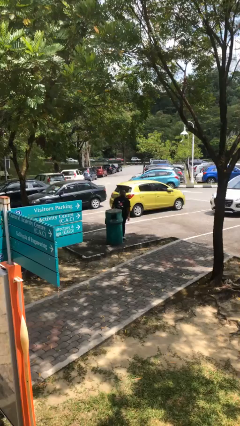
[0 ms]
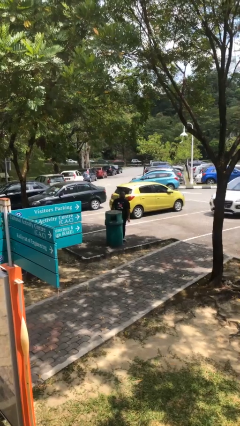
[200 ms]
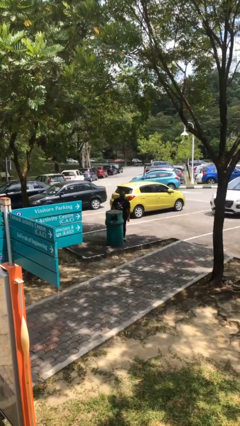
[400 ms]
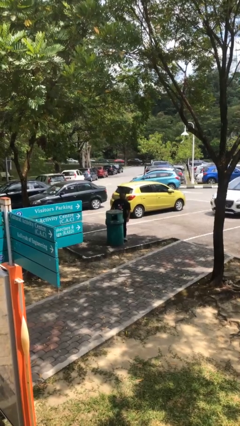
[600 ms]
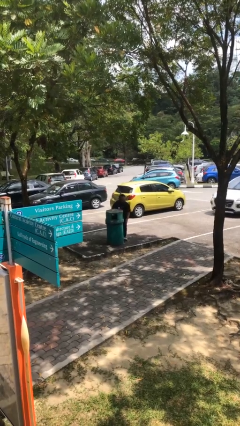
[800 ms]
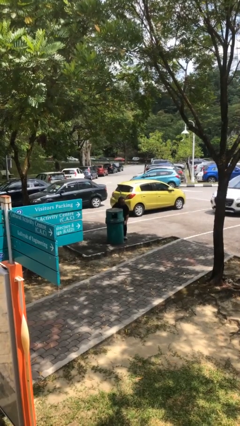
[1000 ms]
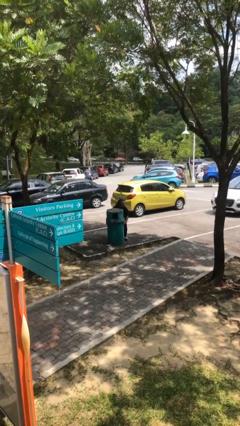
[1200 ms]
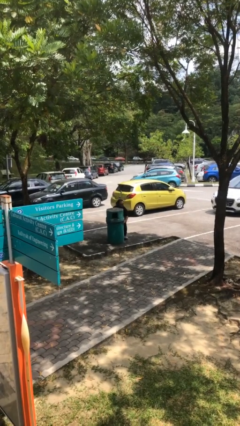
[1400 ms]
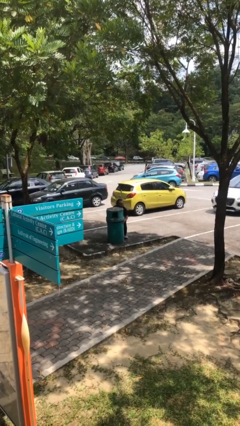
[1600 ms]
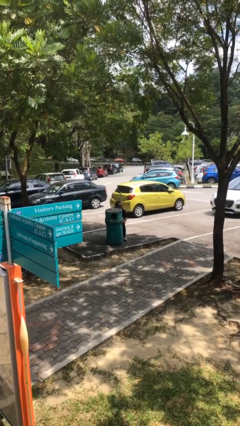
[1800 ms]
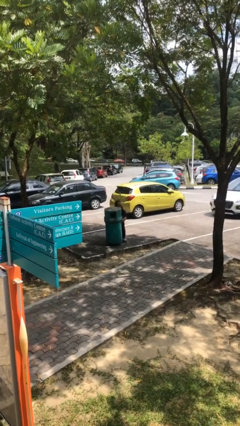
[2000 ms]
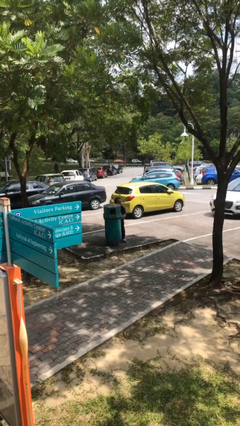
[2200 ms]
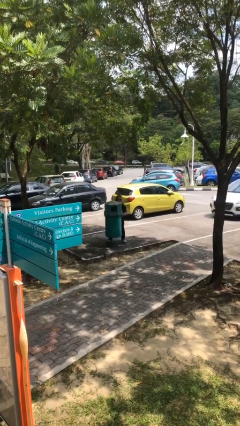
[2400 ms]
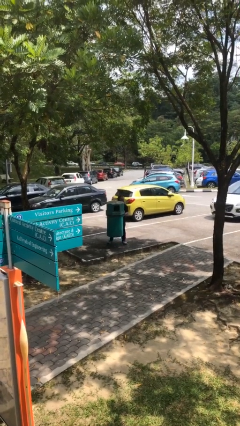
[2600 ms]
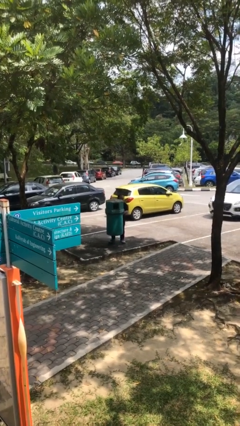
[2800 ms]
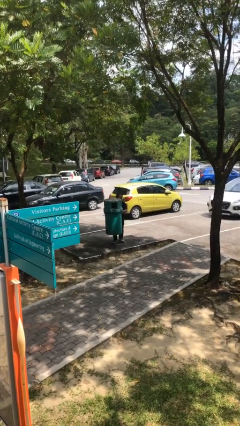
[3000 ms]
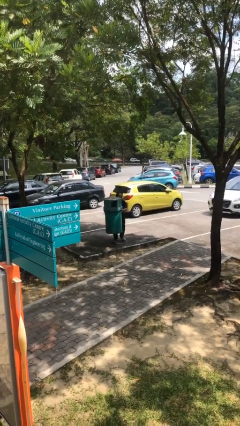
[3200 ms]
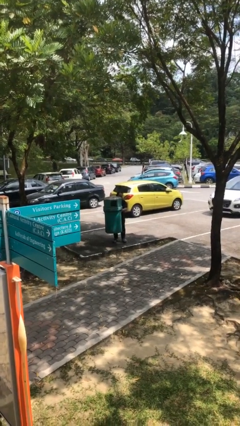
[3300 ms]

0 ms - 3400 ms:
person picks up object from floor

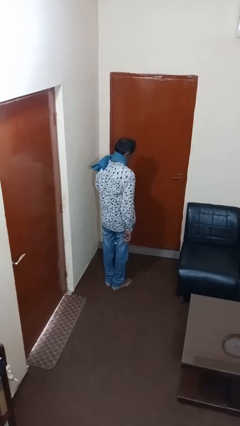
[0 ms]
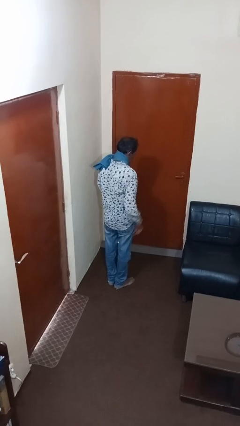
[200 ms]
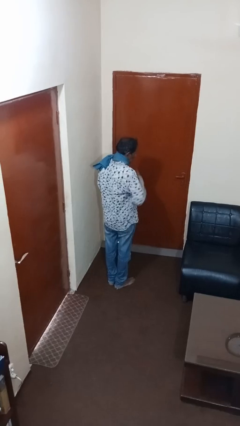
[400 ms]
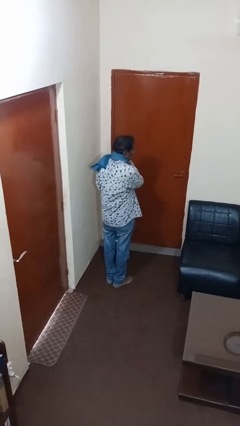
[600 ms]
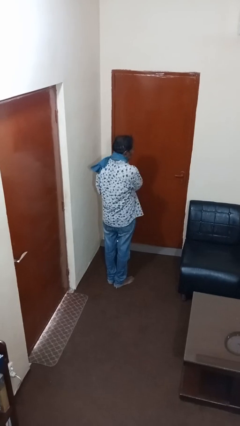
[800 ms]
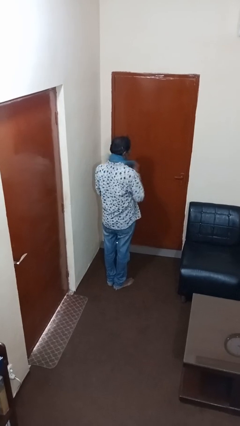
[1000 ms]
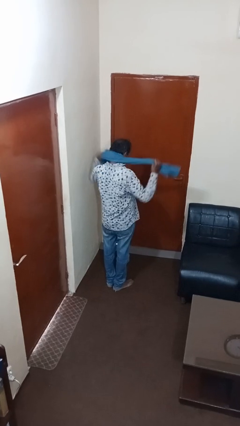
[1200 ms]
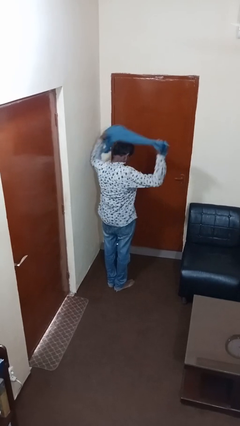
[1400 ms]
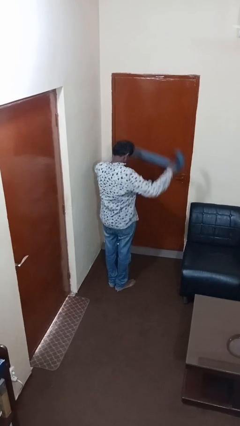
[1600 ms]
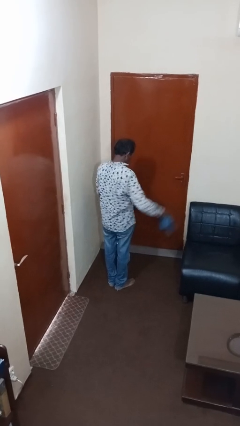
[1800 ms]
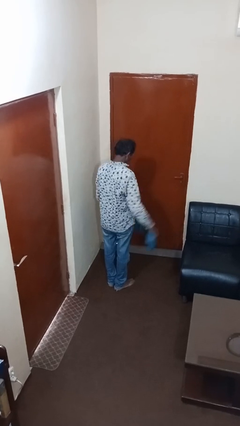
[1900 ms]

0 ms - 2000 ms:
person takes off scarf

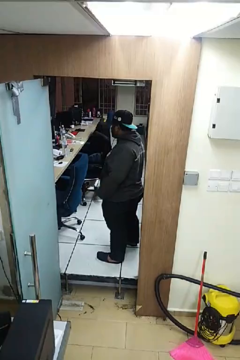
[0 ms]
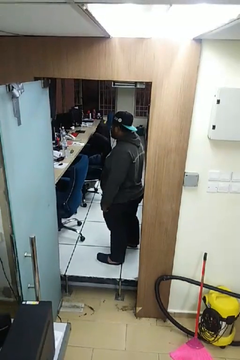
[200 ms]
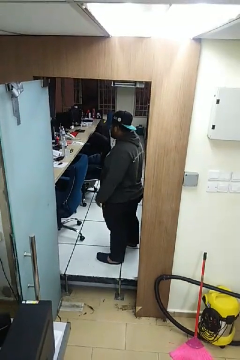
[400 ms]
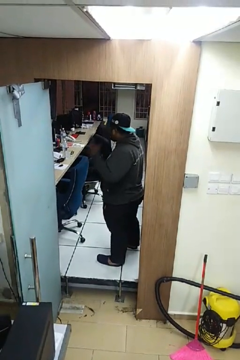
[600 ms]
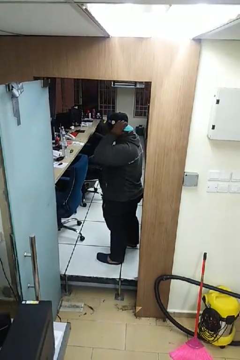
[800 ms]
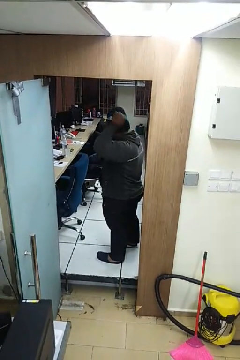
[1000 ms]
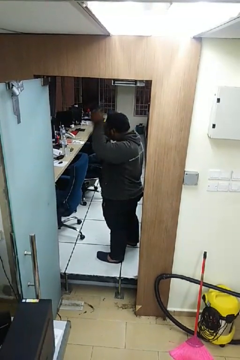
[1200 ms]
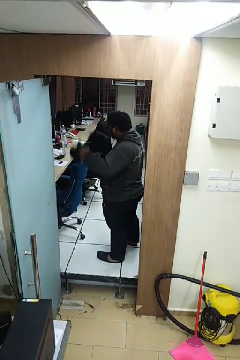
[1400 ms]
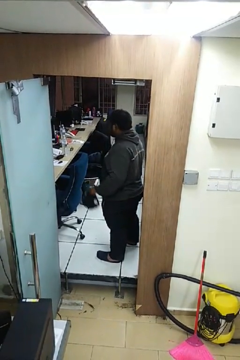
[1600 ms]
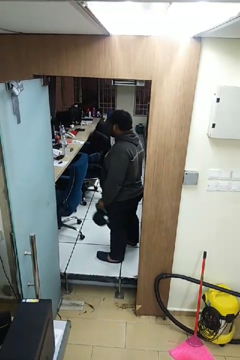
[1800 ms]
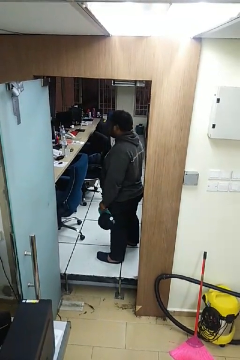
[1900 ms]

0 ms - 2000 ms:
person takes off hat

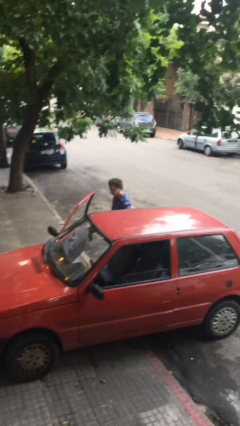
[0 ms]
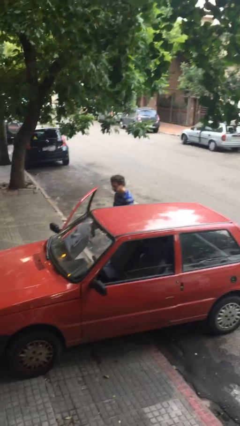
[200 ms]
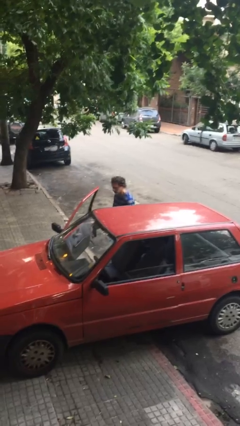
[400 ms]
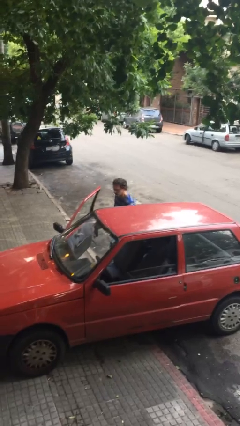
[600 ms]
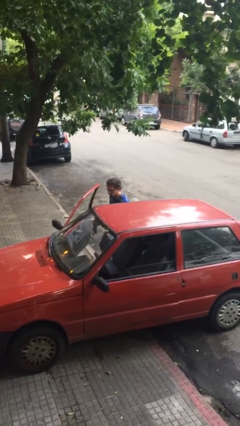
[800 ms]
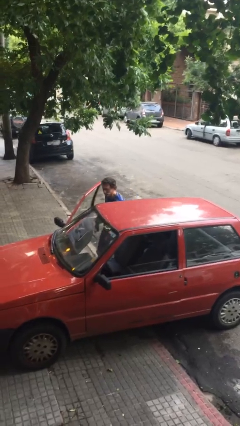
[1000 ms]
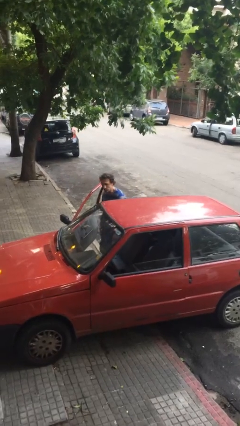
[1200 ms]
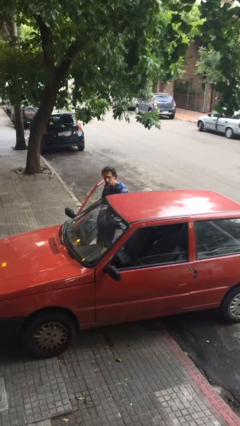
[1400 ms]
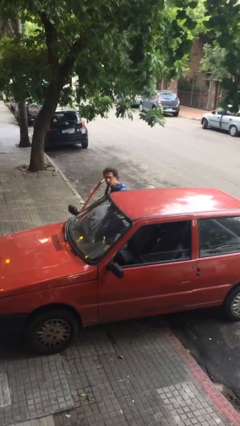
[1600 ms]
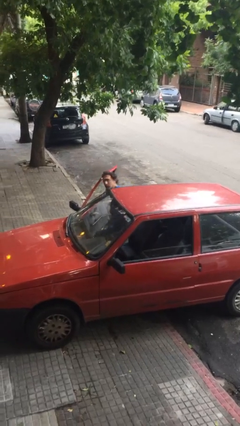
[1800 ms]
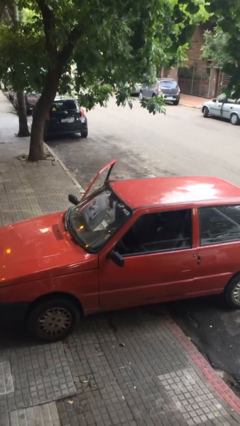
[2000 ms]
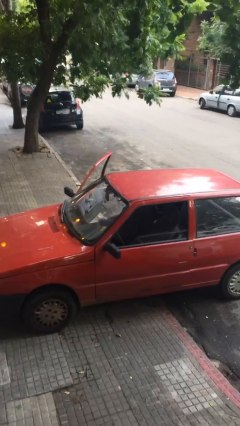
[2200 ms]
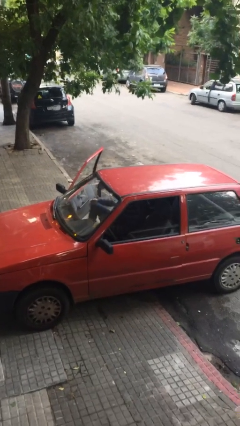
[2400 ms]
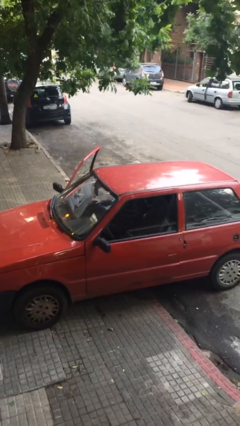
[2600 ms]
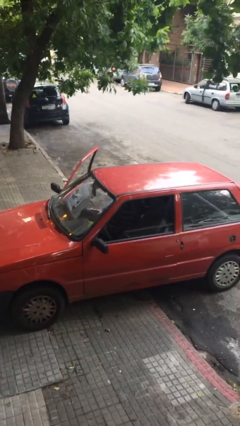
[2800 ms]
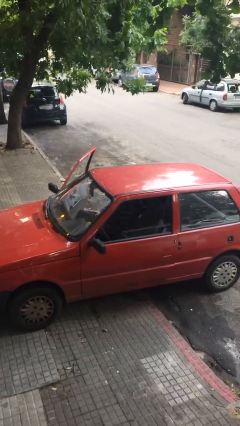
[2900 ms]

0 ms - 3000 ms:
person enters car

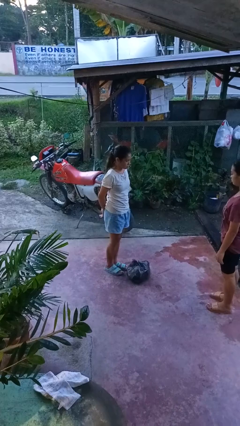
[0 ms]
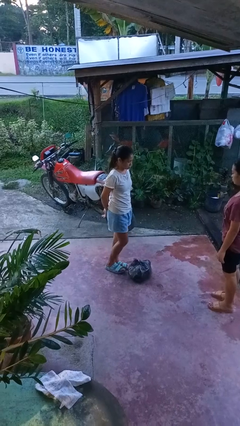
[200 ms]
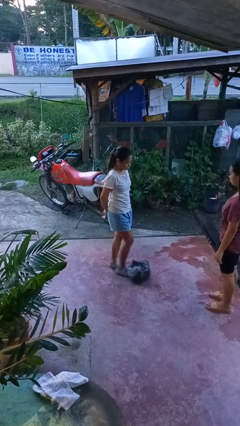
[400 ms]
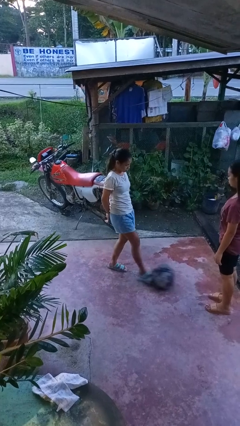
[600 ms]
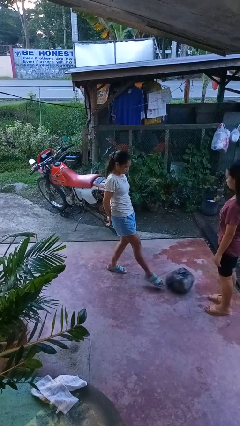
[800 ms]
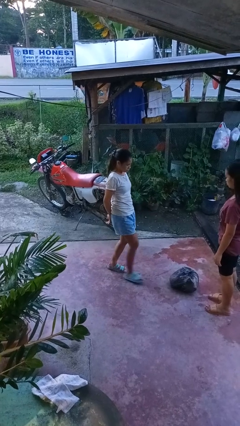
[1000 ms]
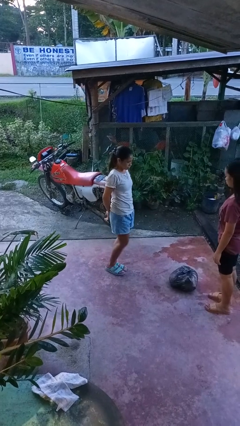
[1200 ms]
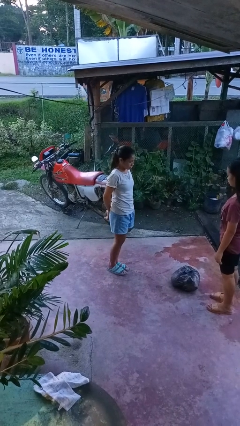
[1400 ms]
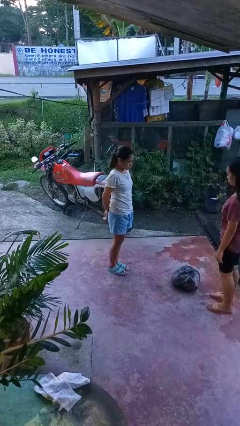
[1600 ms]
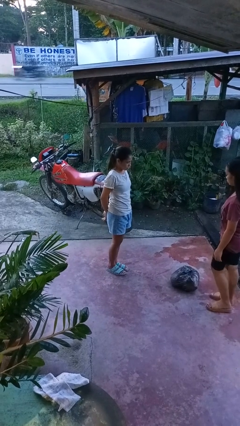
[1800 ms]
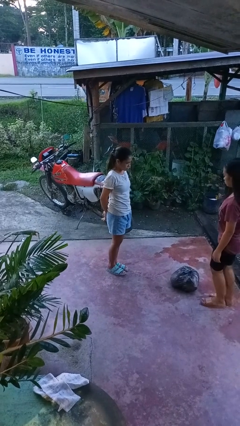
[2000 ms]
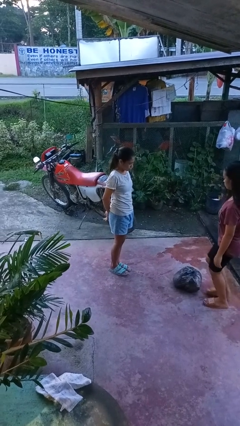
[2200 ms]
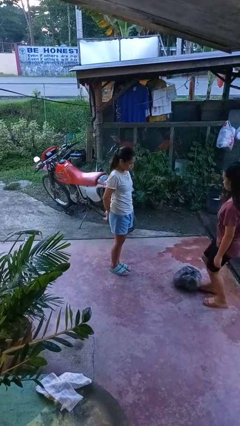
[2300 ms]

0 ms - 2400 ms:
person kicks object to person

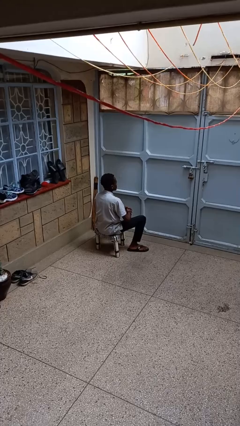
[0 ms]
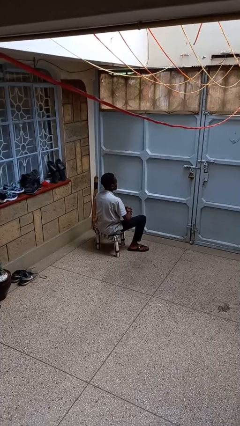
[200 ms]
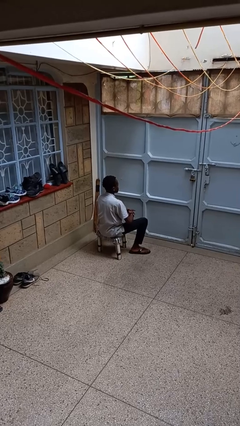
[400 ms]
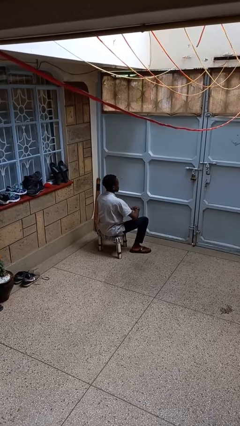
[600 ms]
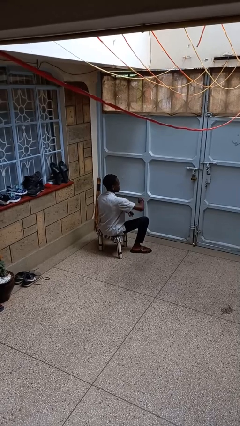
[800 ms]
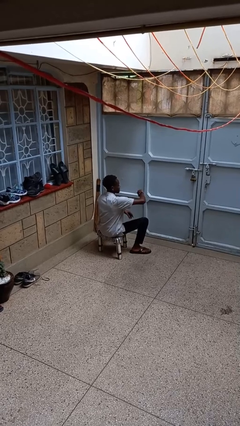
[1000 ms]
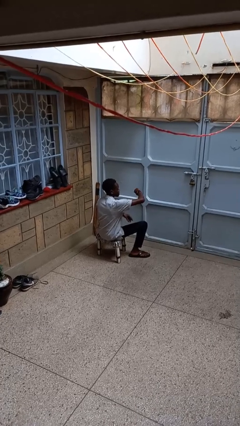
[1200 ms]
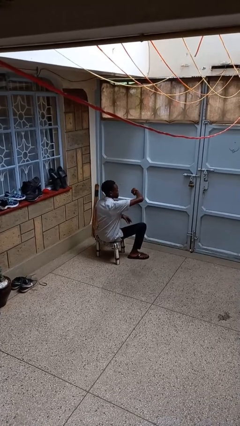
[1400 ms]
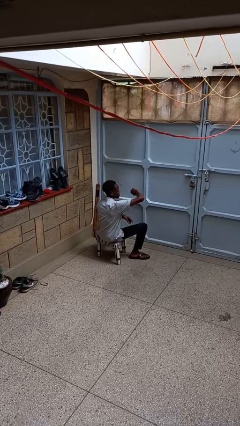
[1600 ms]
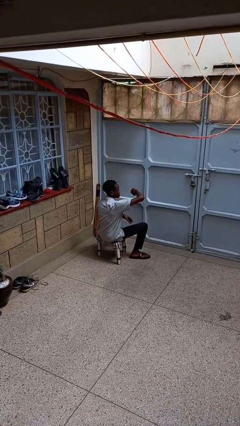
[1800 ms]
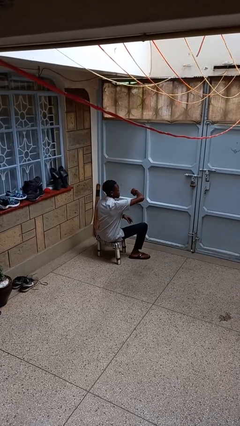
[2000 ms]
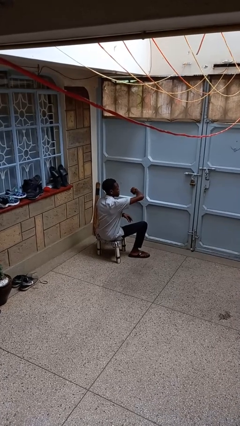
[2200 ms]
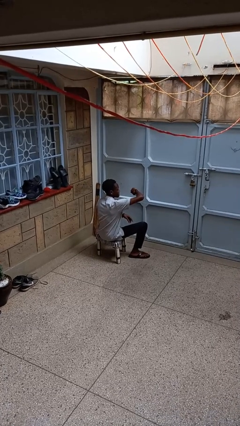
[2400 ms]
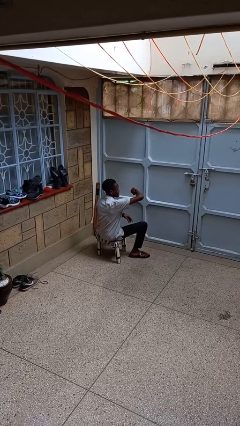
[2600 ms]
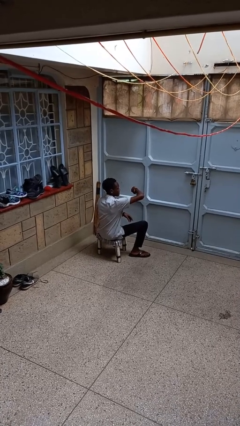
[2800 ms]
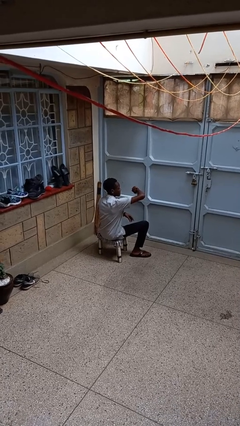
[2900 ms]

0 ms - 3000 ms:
person looks at wristwatch

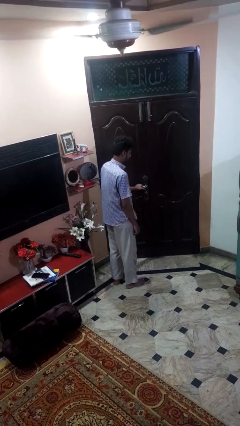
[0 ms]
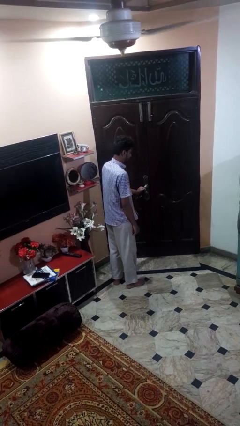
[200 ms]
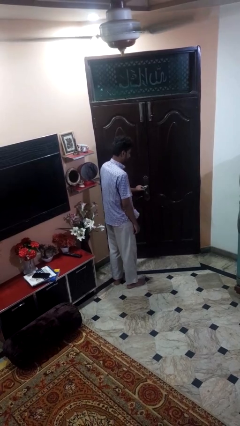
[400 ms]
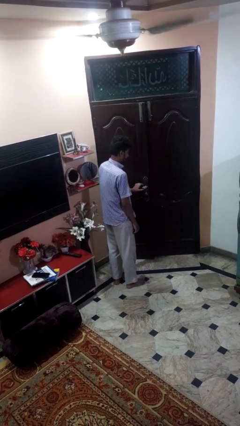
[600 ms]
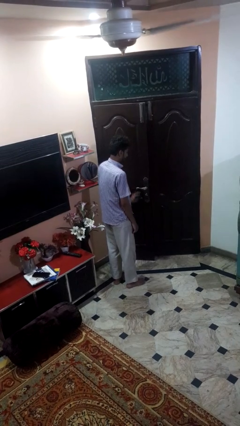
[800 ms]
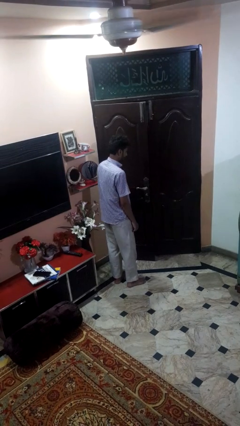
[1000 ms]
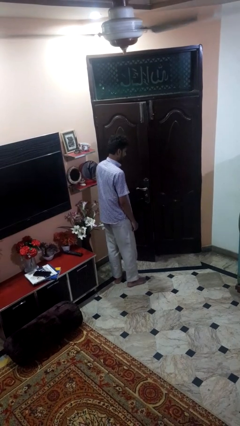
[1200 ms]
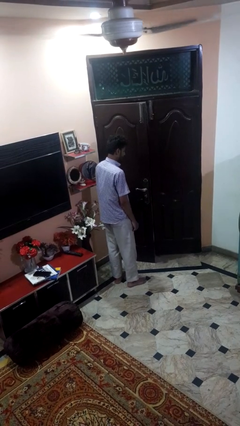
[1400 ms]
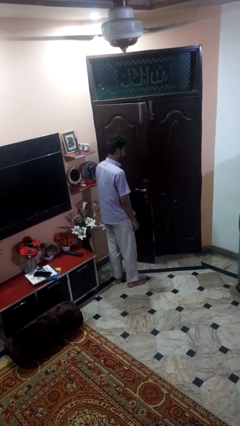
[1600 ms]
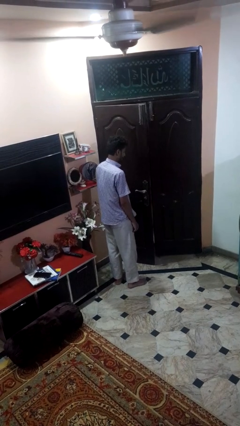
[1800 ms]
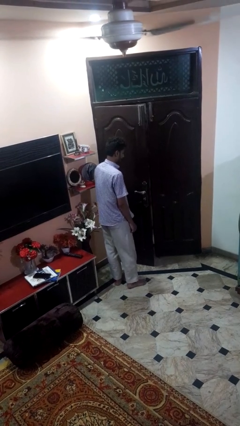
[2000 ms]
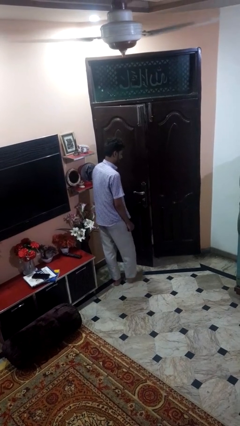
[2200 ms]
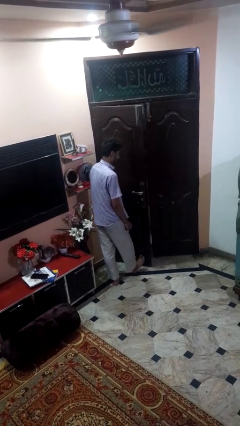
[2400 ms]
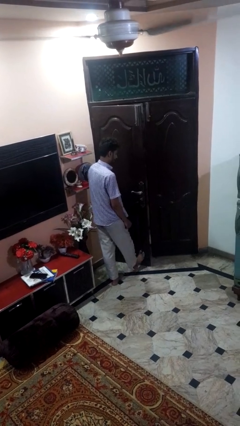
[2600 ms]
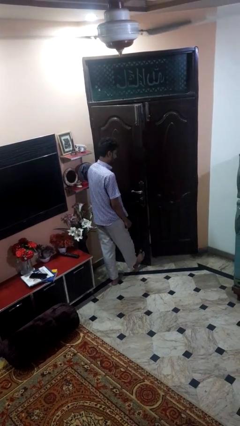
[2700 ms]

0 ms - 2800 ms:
person opens facility door
